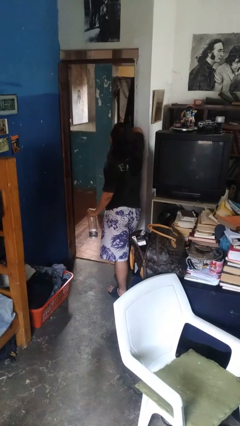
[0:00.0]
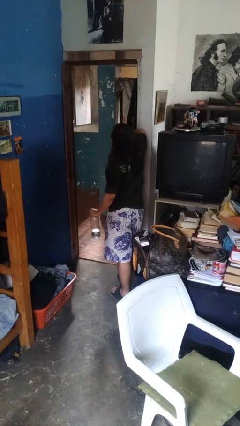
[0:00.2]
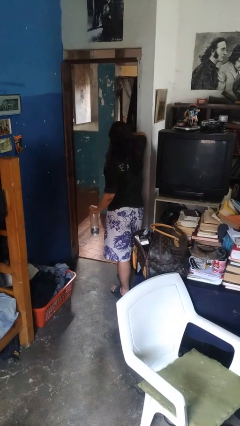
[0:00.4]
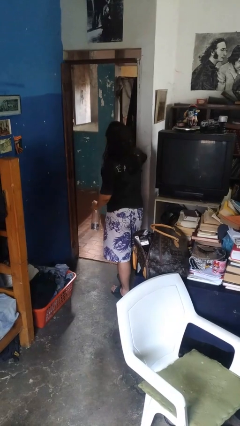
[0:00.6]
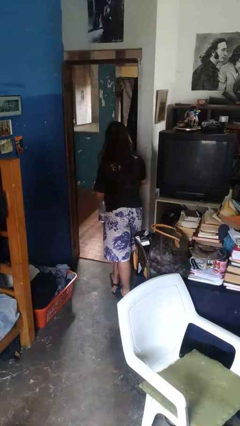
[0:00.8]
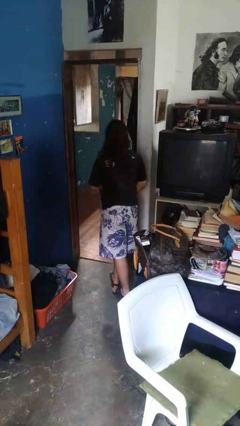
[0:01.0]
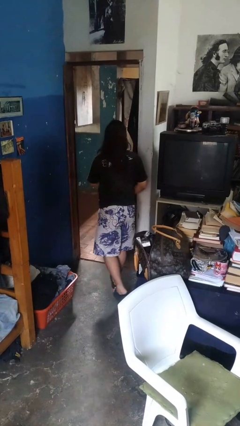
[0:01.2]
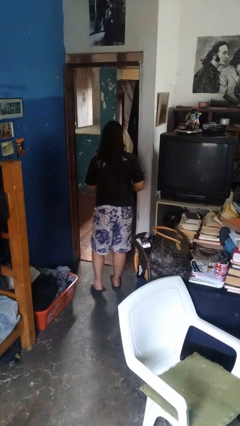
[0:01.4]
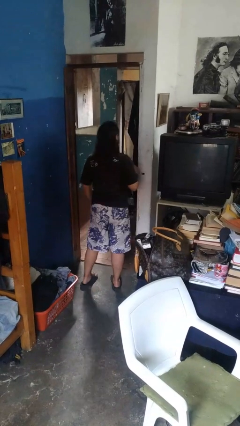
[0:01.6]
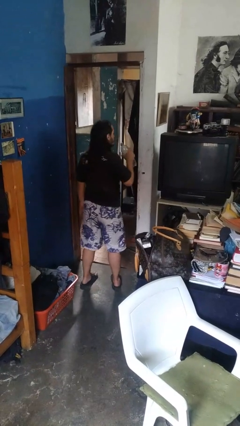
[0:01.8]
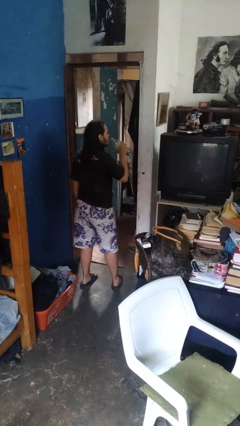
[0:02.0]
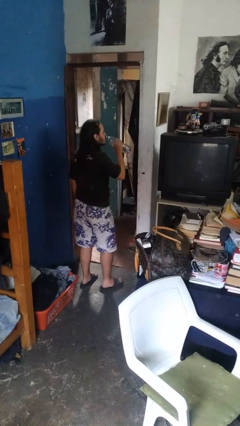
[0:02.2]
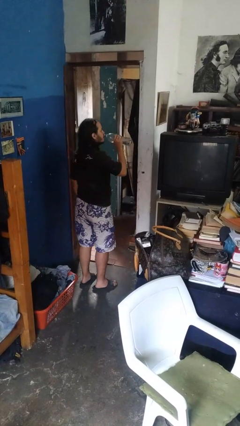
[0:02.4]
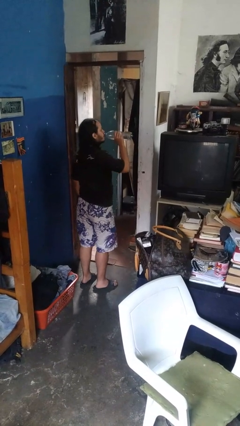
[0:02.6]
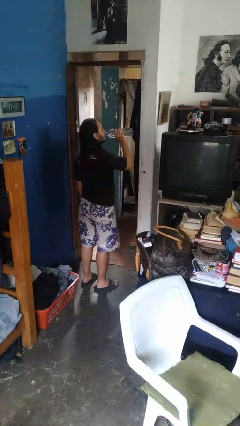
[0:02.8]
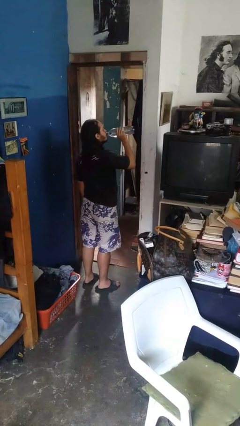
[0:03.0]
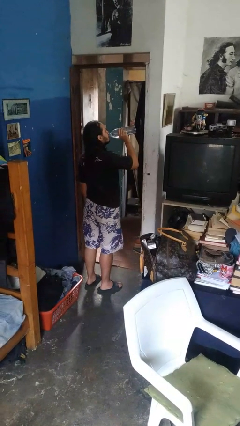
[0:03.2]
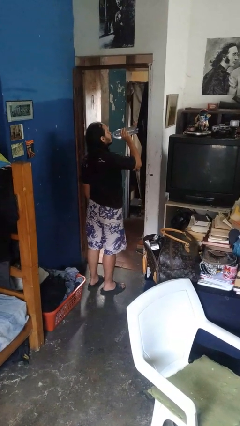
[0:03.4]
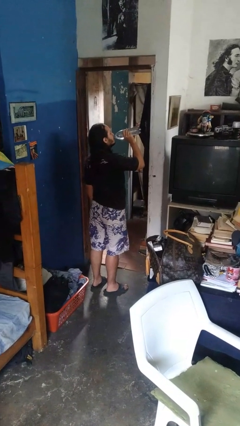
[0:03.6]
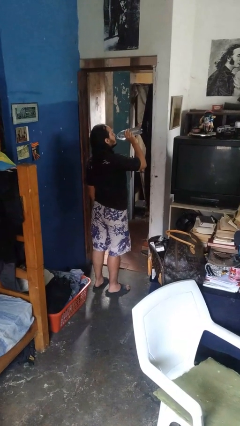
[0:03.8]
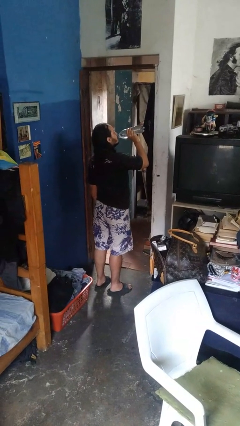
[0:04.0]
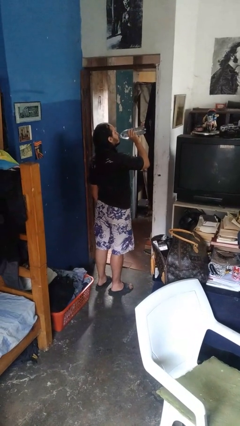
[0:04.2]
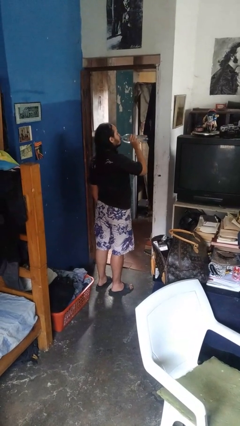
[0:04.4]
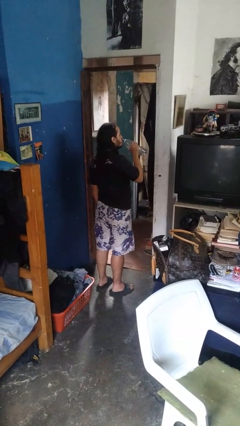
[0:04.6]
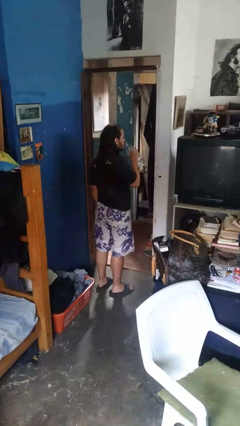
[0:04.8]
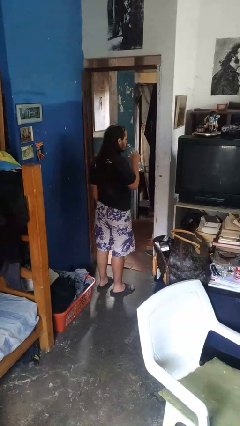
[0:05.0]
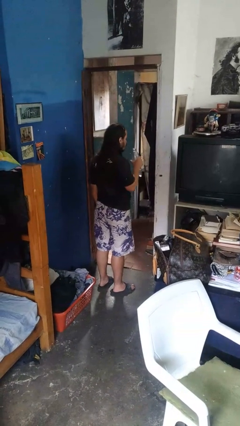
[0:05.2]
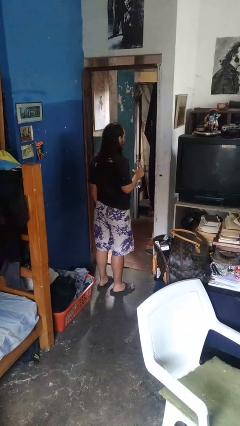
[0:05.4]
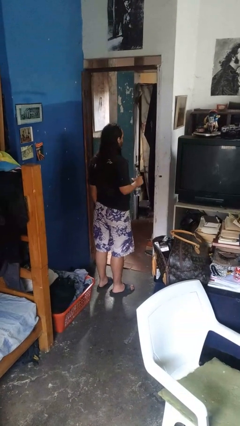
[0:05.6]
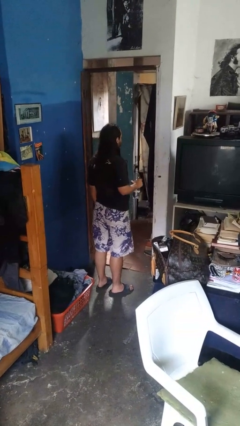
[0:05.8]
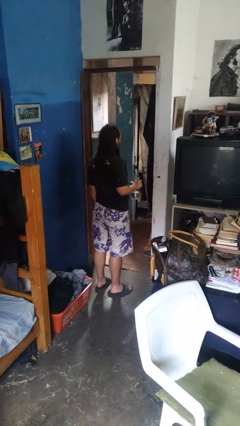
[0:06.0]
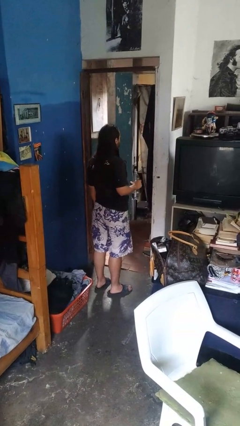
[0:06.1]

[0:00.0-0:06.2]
person drinks from bottle

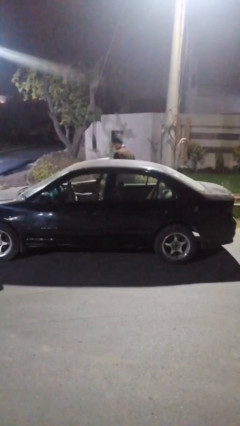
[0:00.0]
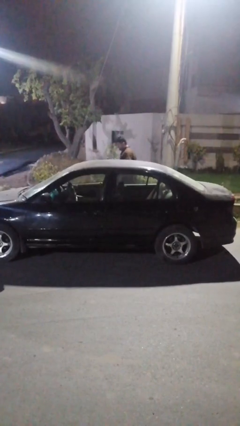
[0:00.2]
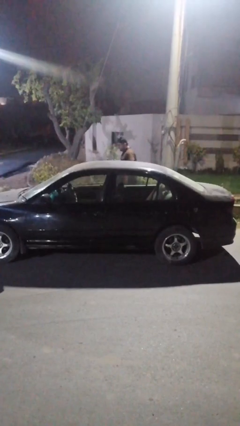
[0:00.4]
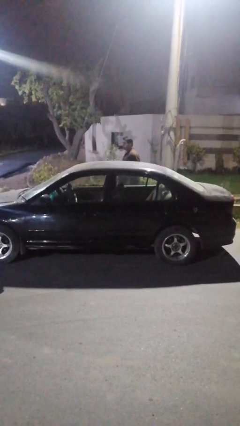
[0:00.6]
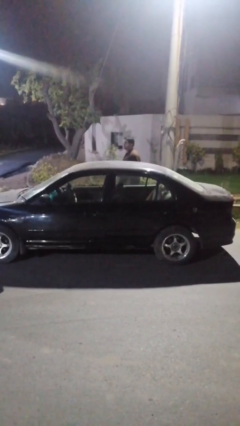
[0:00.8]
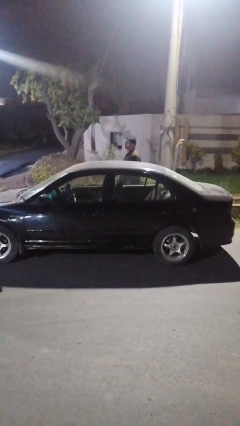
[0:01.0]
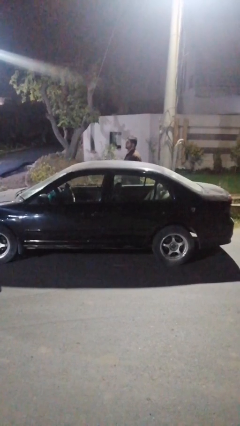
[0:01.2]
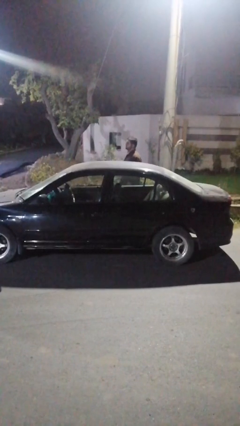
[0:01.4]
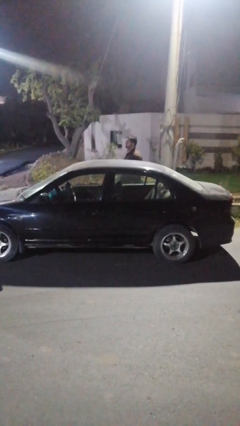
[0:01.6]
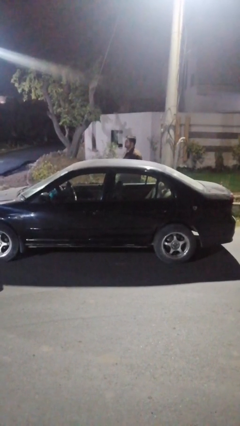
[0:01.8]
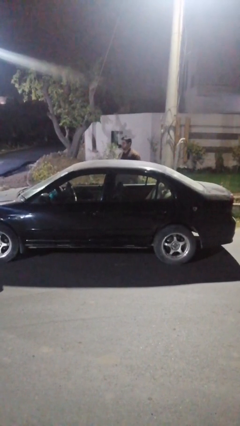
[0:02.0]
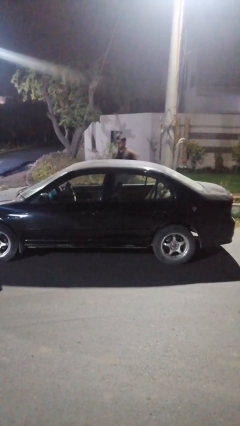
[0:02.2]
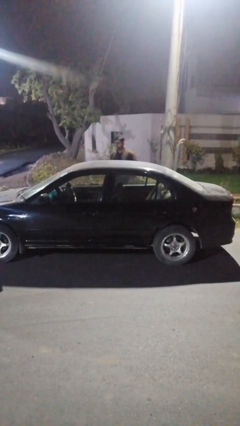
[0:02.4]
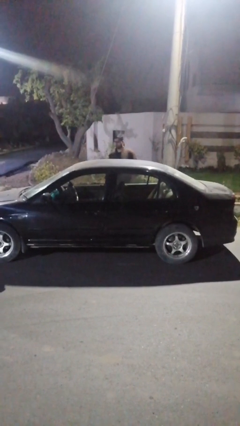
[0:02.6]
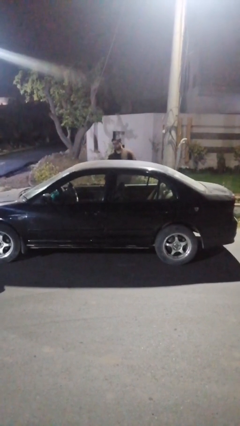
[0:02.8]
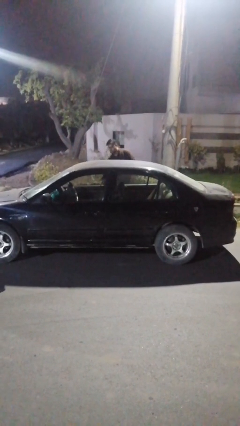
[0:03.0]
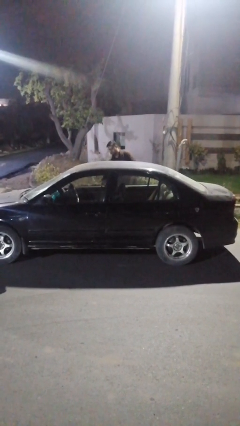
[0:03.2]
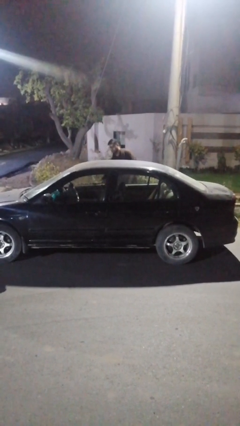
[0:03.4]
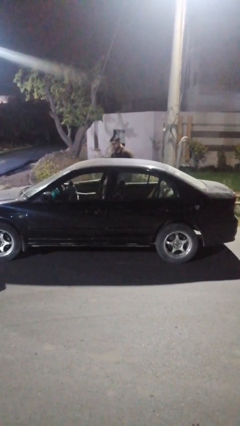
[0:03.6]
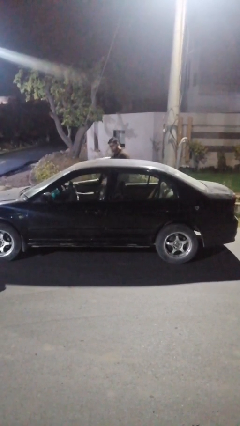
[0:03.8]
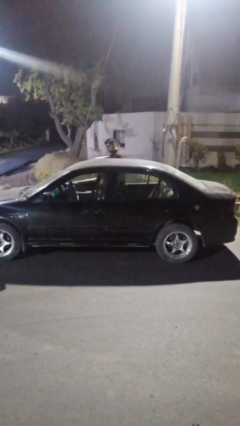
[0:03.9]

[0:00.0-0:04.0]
car drops off person

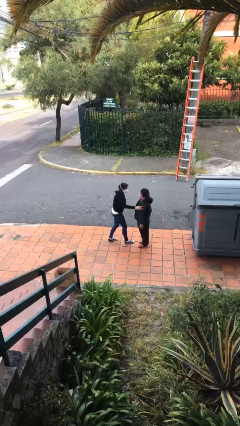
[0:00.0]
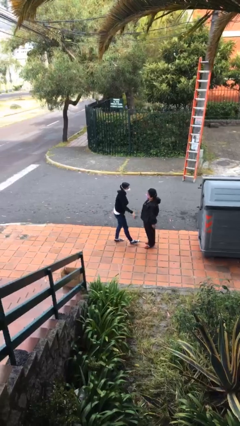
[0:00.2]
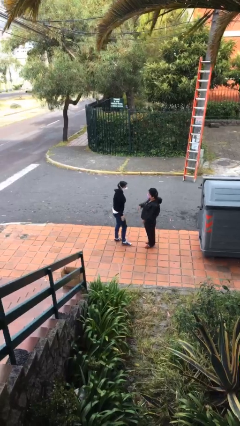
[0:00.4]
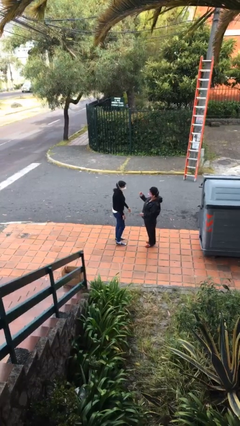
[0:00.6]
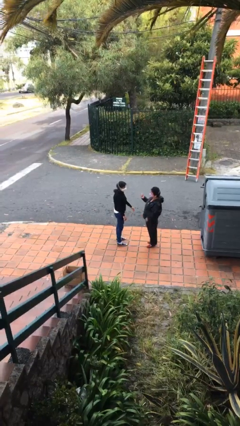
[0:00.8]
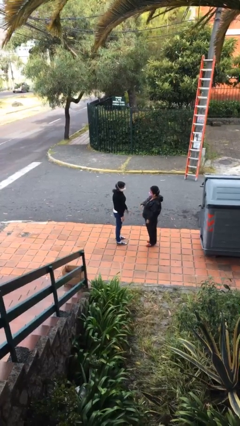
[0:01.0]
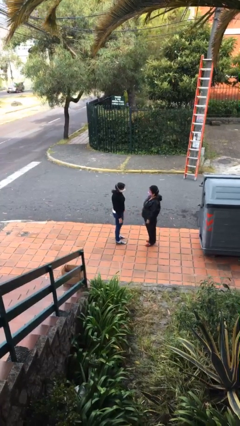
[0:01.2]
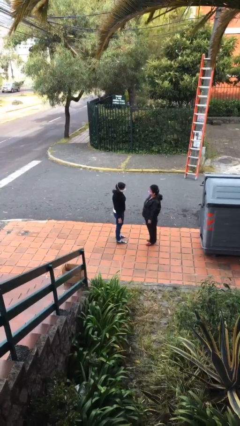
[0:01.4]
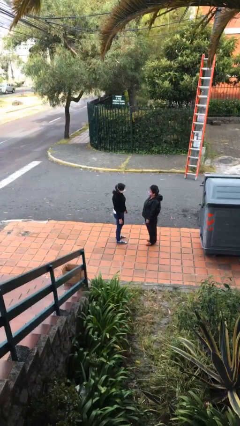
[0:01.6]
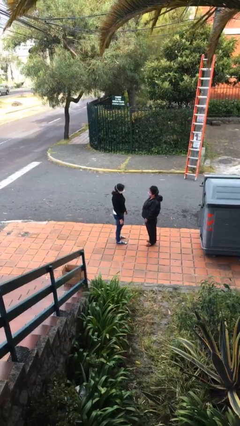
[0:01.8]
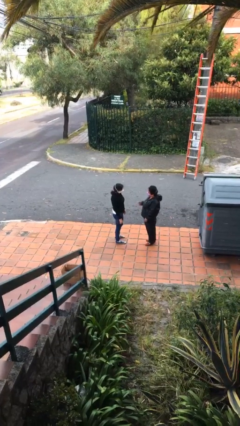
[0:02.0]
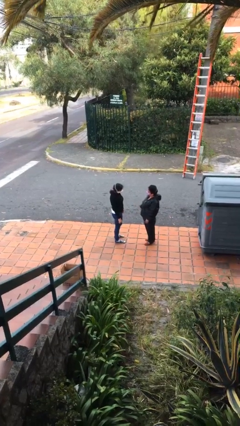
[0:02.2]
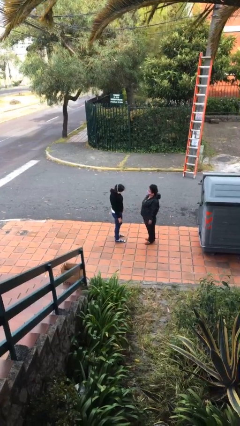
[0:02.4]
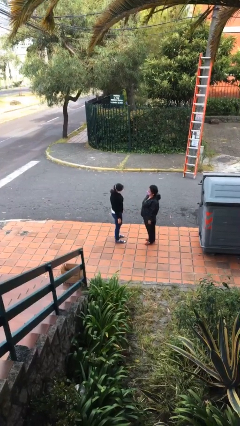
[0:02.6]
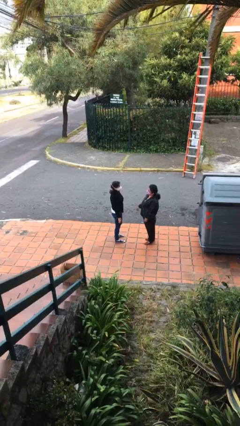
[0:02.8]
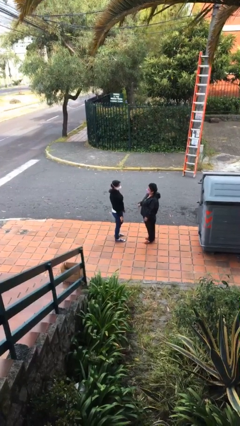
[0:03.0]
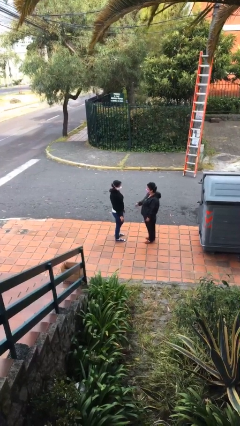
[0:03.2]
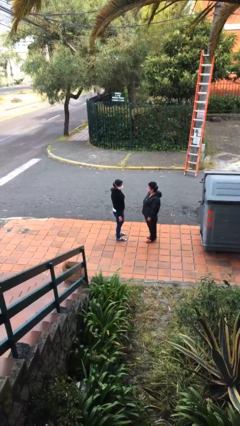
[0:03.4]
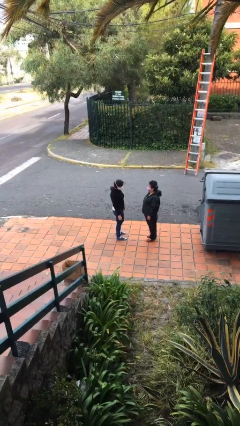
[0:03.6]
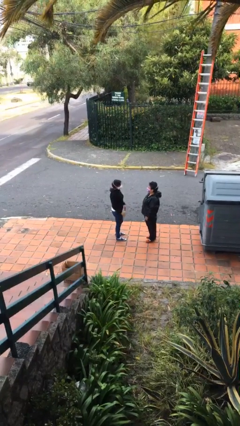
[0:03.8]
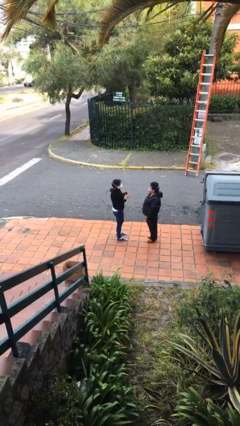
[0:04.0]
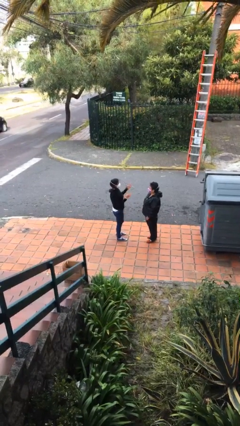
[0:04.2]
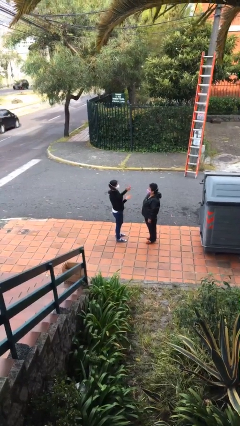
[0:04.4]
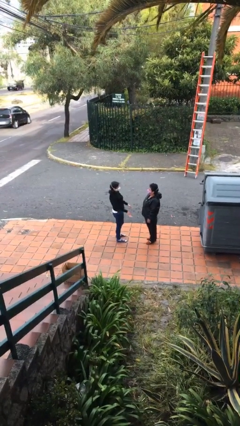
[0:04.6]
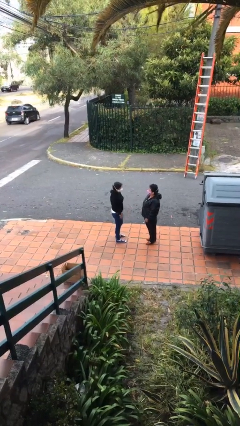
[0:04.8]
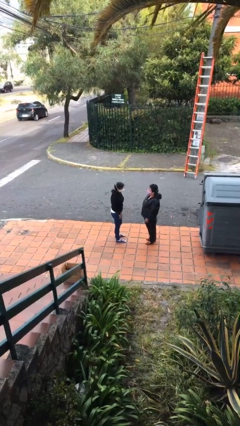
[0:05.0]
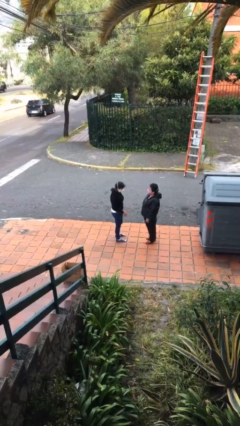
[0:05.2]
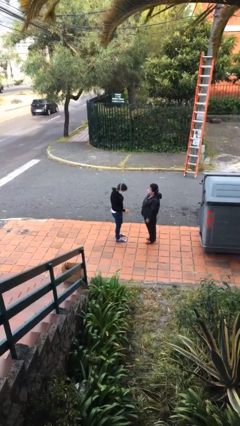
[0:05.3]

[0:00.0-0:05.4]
person talks to person

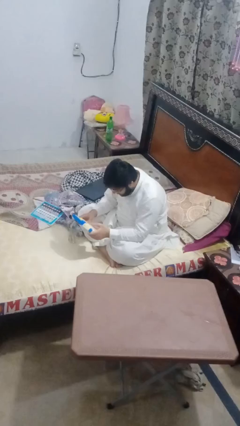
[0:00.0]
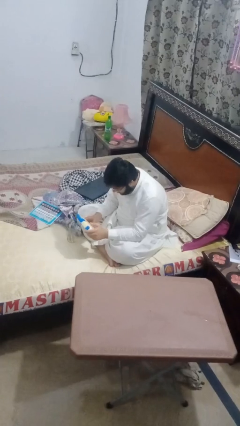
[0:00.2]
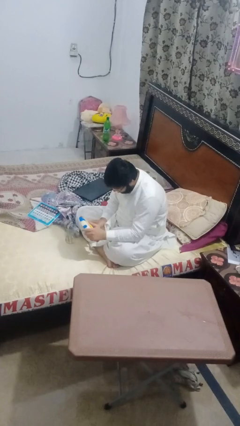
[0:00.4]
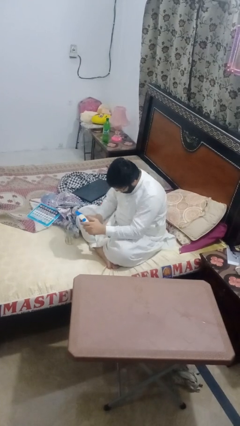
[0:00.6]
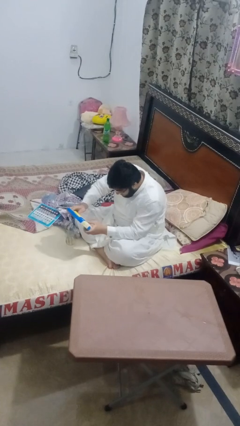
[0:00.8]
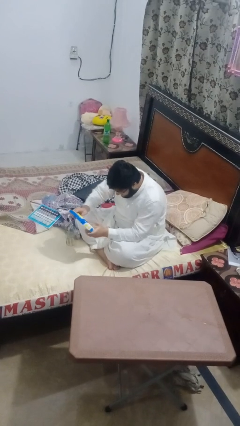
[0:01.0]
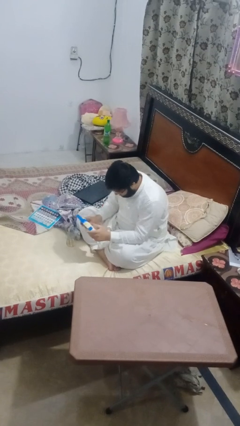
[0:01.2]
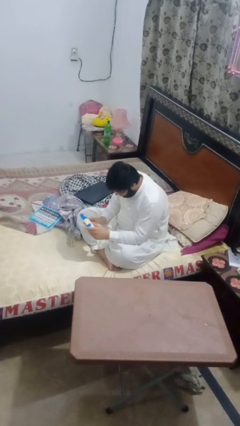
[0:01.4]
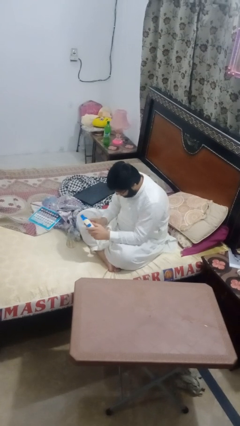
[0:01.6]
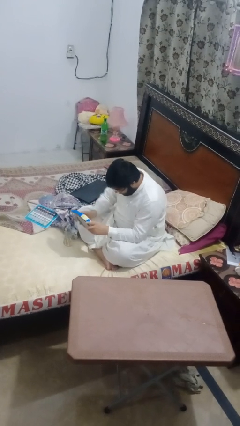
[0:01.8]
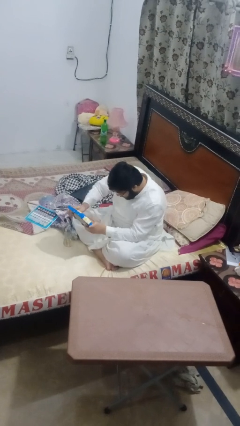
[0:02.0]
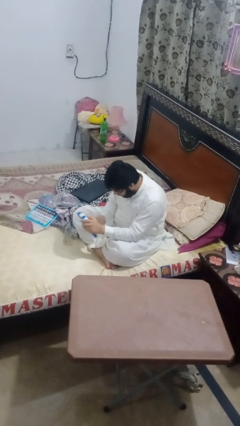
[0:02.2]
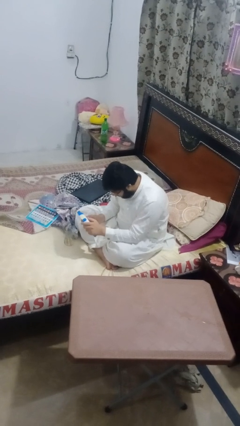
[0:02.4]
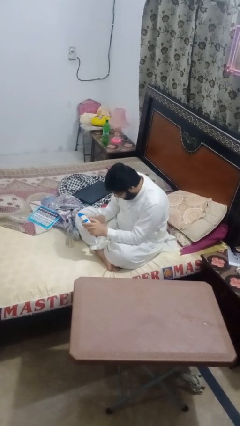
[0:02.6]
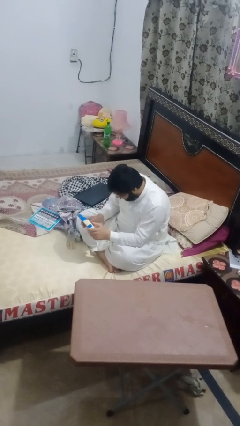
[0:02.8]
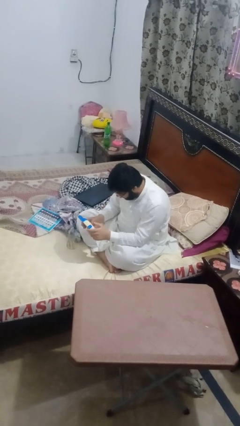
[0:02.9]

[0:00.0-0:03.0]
person interacts with handheld game
